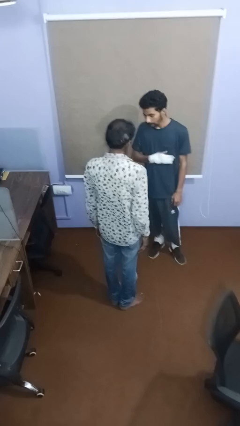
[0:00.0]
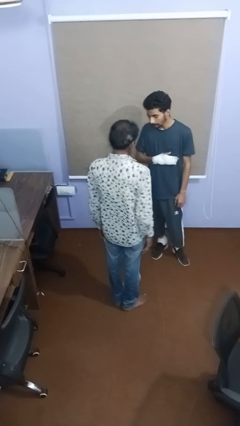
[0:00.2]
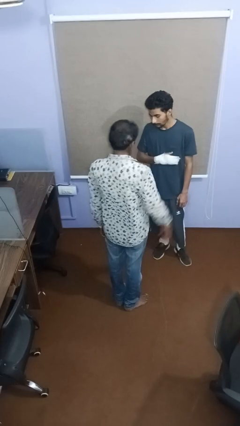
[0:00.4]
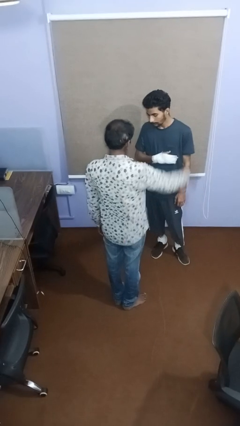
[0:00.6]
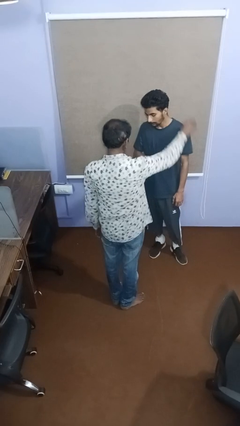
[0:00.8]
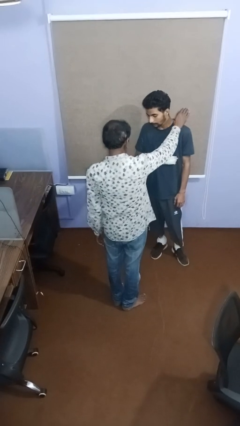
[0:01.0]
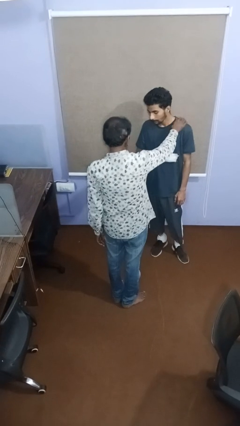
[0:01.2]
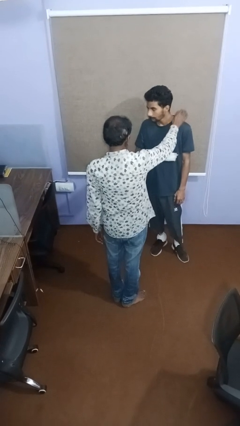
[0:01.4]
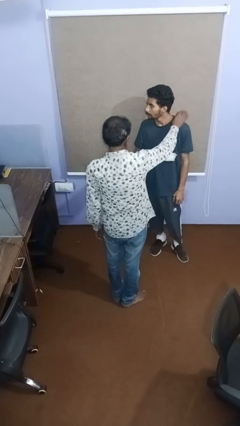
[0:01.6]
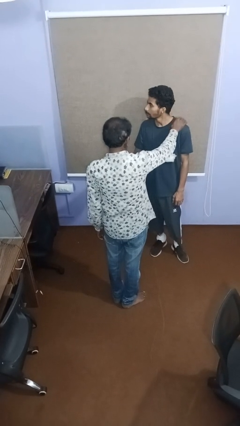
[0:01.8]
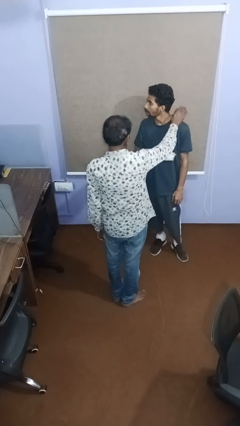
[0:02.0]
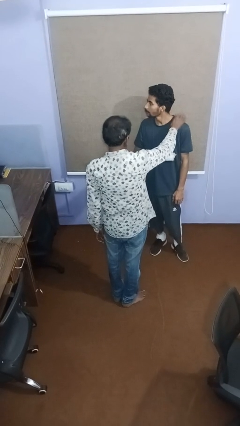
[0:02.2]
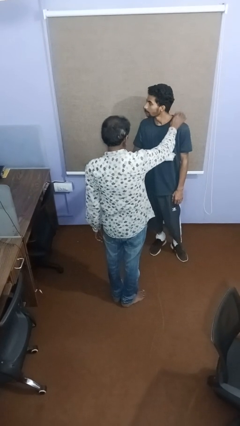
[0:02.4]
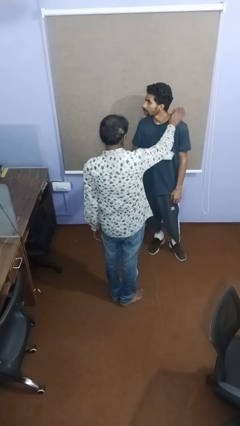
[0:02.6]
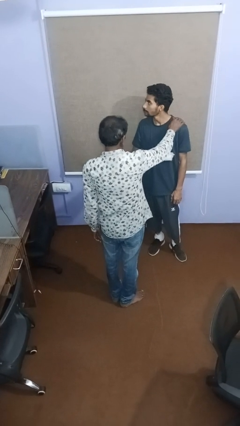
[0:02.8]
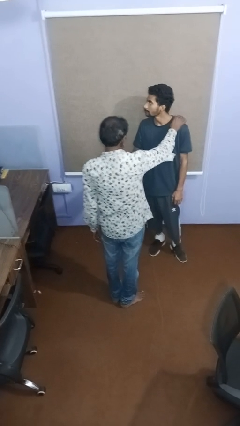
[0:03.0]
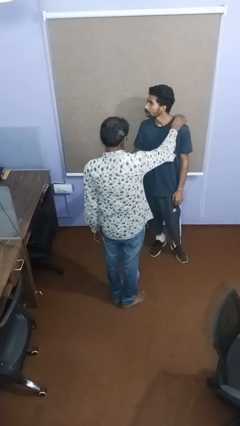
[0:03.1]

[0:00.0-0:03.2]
person pounds shoulders of person

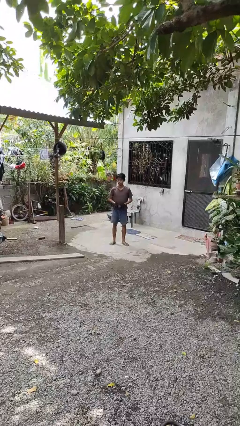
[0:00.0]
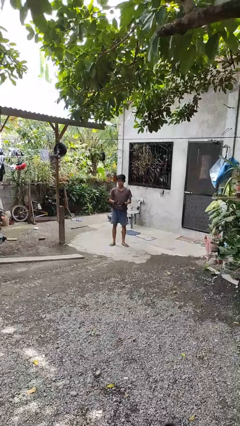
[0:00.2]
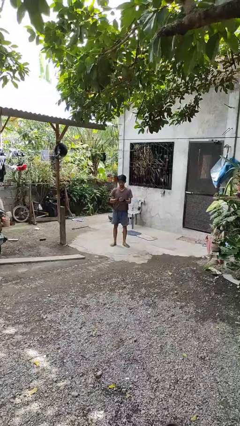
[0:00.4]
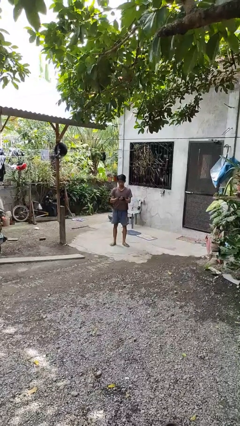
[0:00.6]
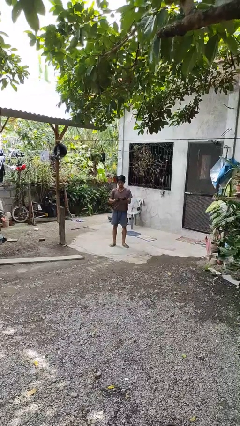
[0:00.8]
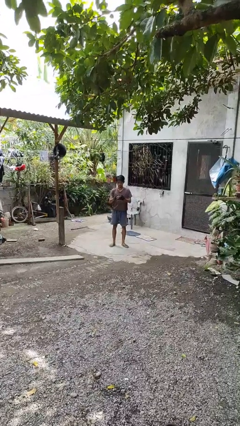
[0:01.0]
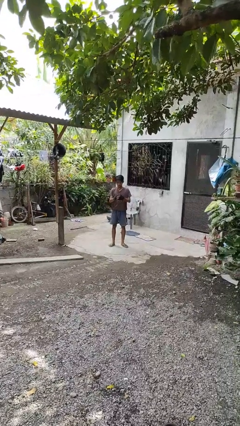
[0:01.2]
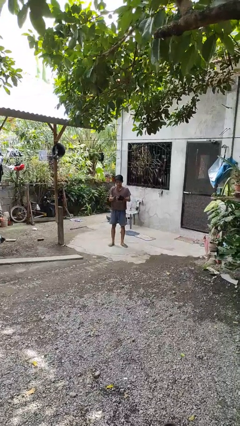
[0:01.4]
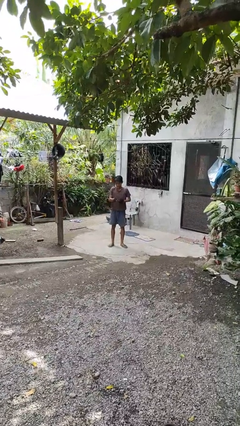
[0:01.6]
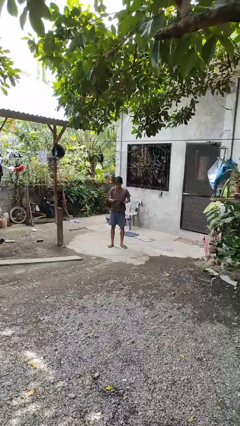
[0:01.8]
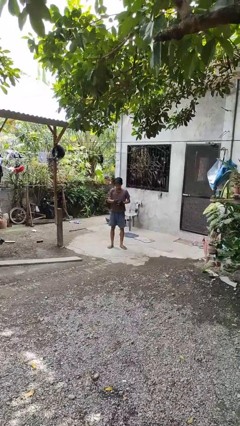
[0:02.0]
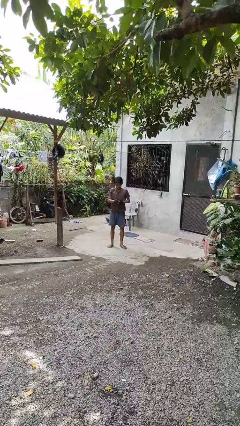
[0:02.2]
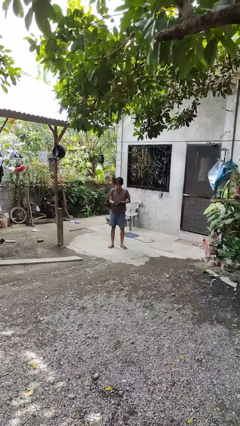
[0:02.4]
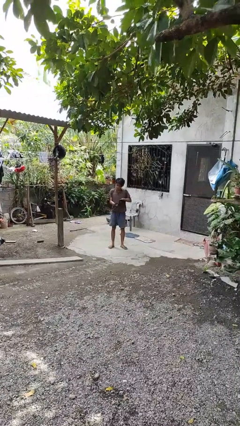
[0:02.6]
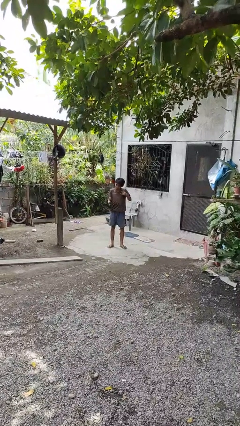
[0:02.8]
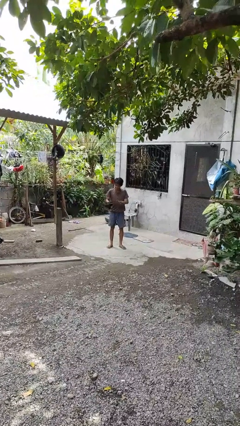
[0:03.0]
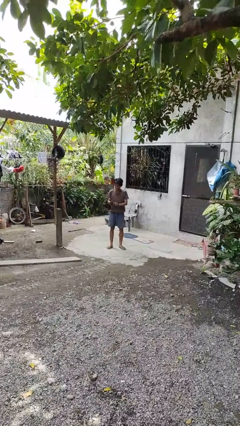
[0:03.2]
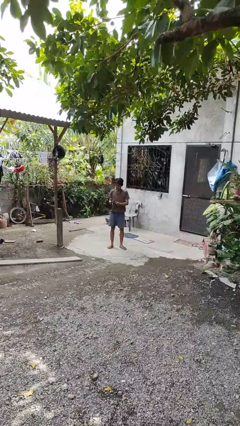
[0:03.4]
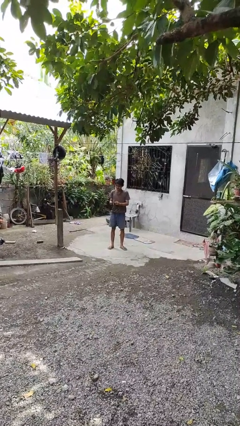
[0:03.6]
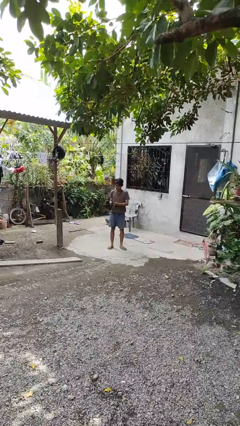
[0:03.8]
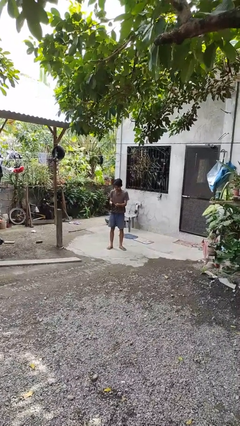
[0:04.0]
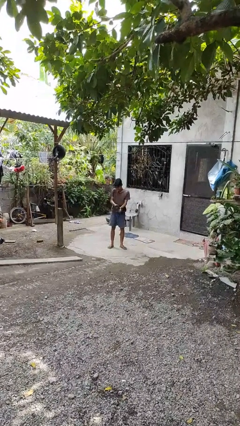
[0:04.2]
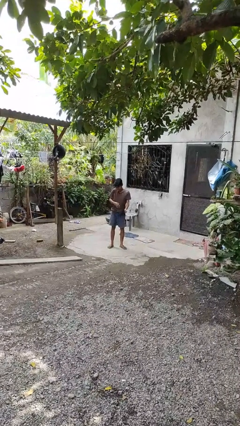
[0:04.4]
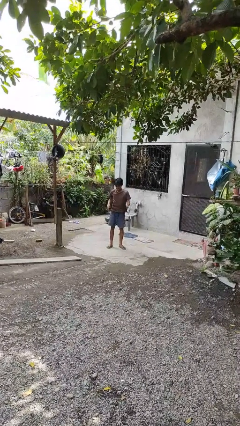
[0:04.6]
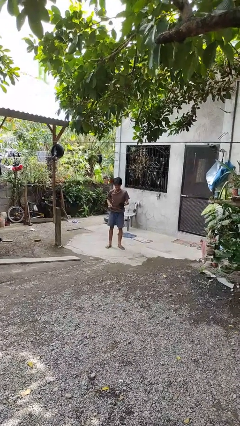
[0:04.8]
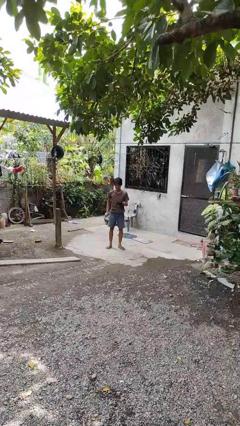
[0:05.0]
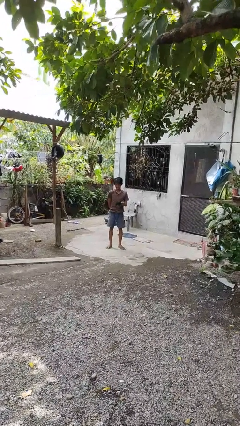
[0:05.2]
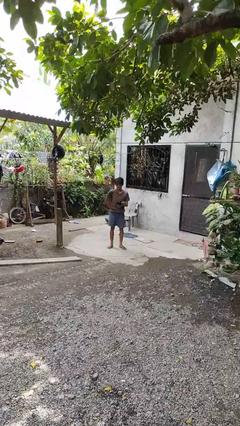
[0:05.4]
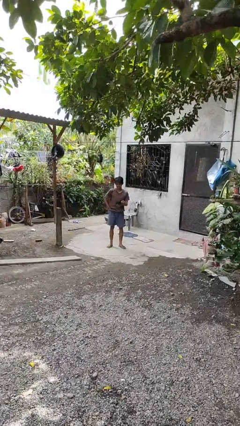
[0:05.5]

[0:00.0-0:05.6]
person takes off gloves

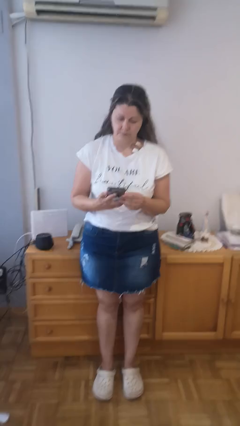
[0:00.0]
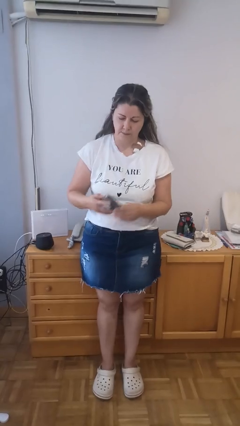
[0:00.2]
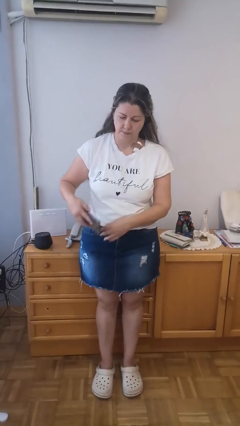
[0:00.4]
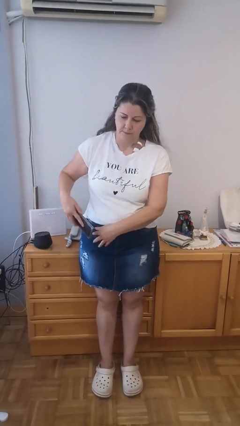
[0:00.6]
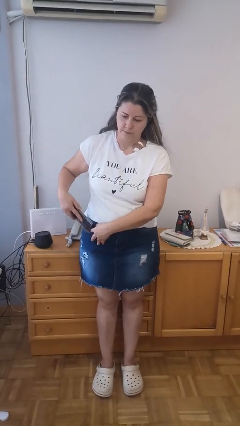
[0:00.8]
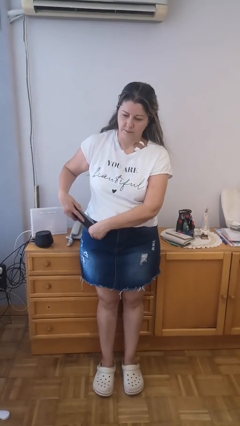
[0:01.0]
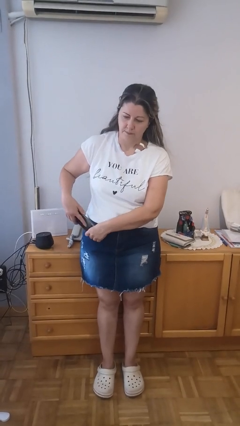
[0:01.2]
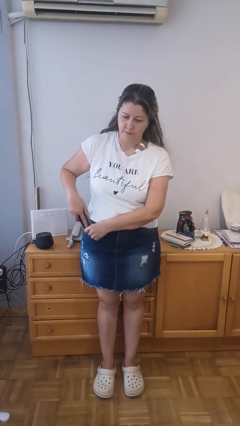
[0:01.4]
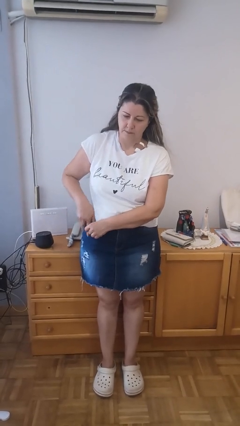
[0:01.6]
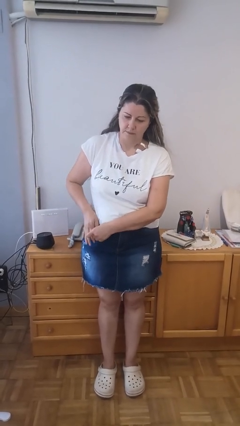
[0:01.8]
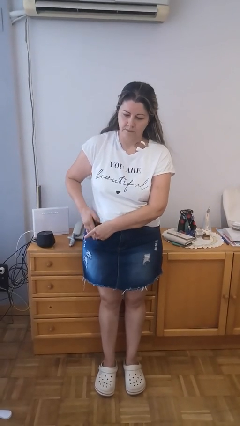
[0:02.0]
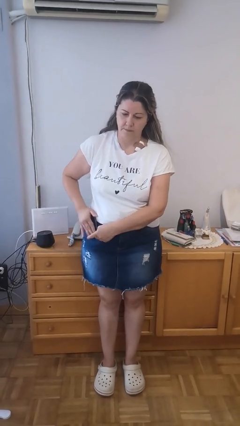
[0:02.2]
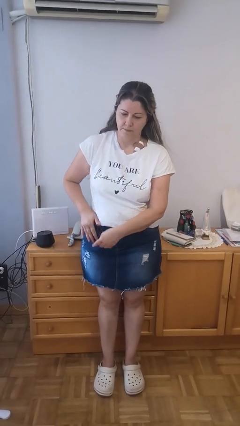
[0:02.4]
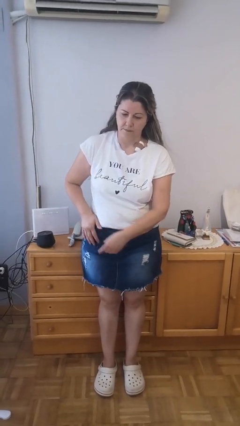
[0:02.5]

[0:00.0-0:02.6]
person puts phone into pocket

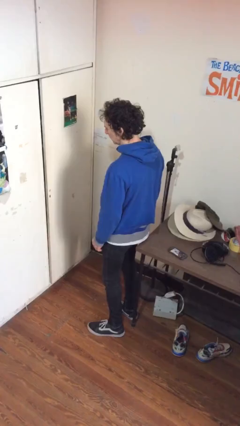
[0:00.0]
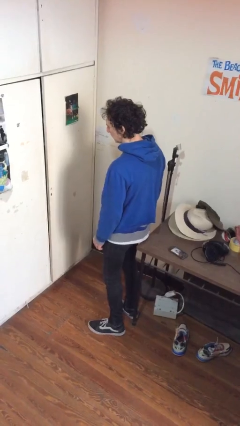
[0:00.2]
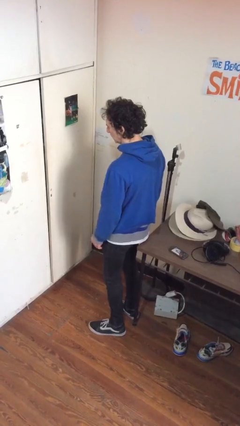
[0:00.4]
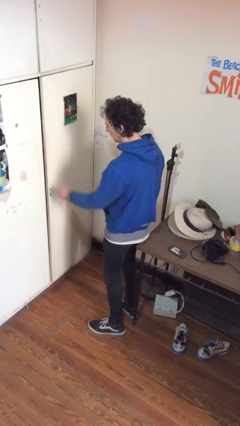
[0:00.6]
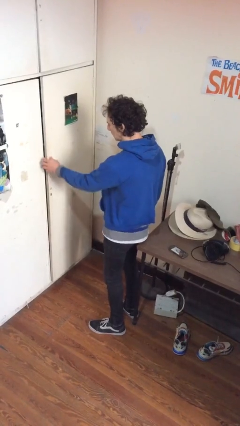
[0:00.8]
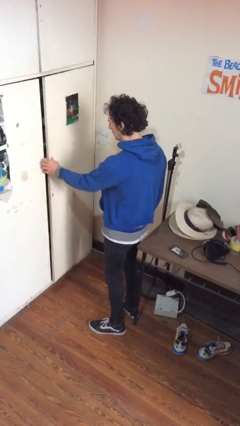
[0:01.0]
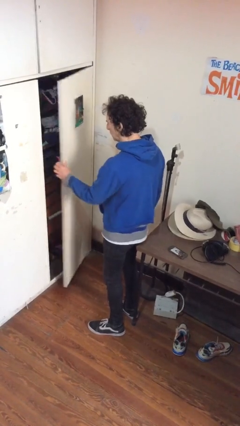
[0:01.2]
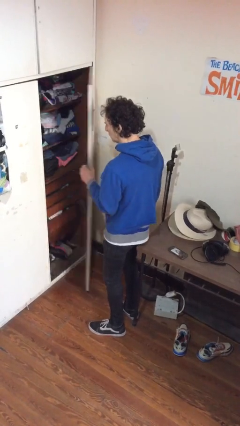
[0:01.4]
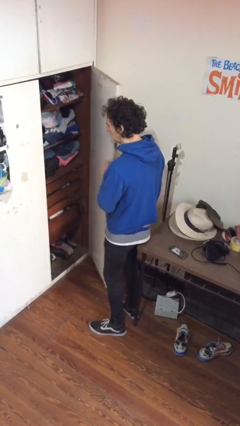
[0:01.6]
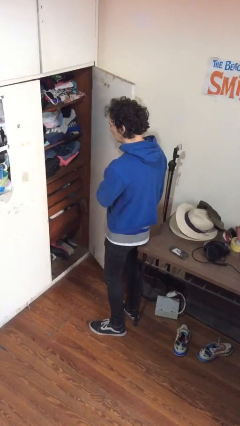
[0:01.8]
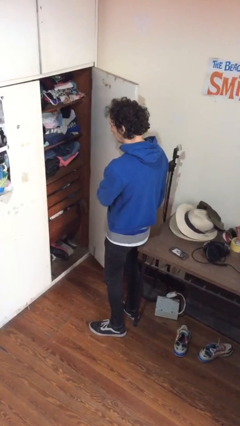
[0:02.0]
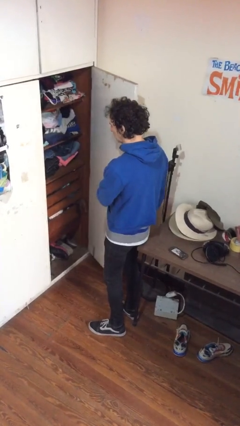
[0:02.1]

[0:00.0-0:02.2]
person opens closet door

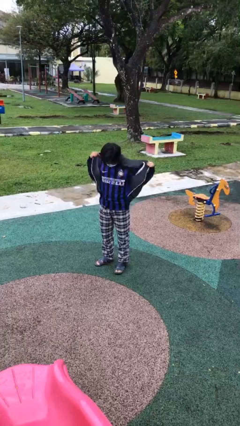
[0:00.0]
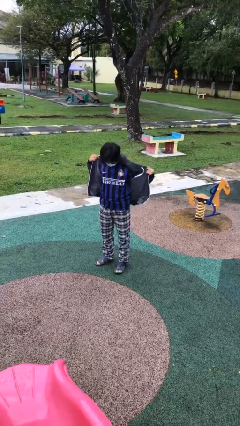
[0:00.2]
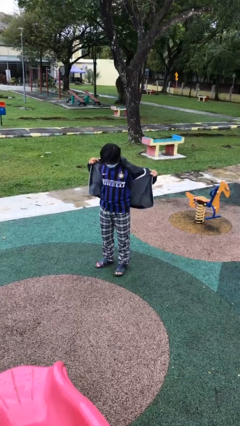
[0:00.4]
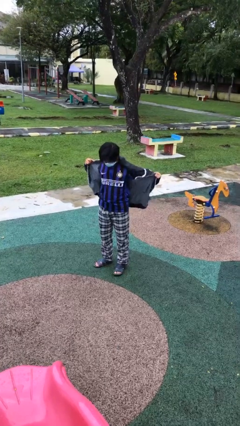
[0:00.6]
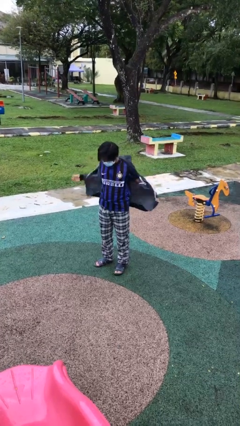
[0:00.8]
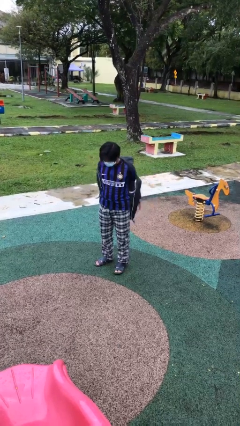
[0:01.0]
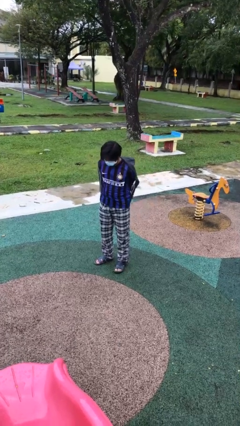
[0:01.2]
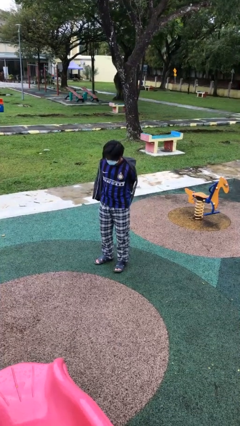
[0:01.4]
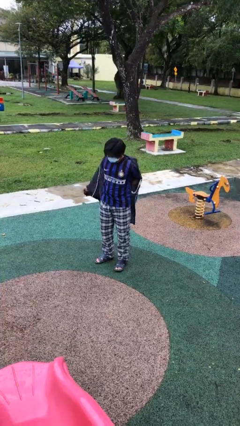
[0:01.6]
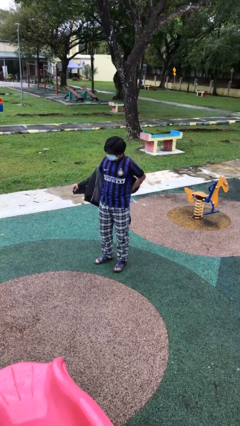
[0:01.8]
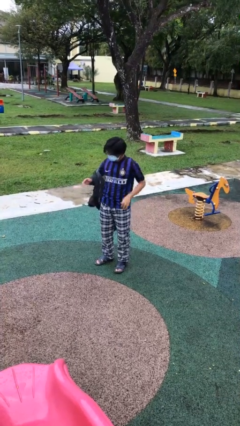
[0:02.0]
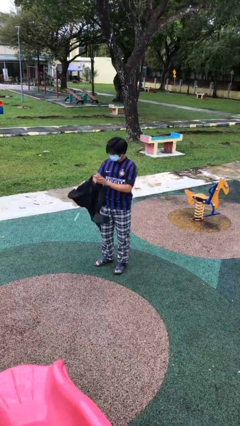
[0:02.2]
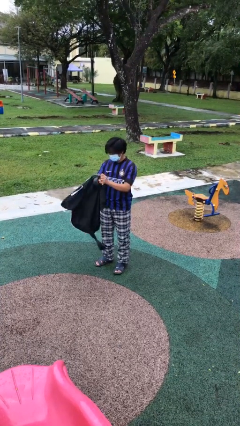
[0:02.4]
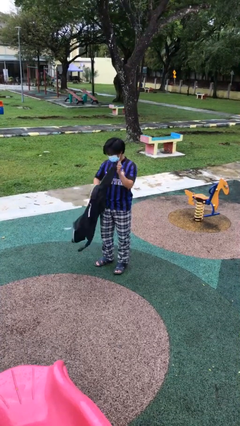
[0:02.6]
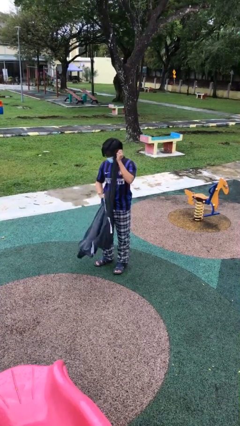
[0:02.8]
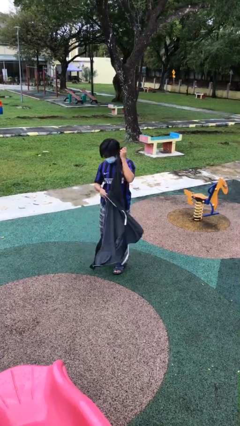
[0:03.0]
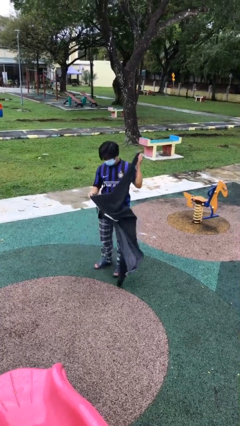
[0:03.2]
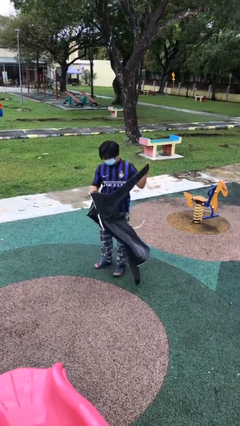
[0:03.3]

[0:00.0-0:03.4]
person takes off jacket
